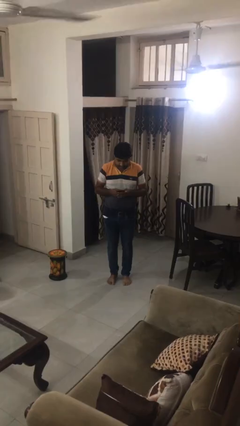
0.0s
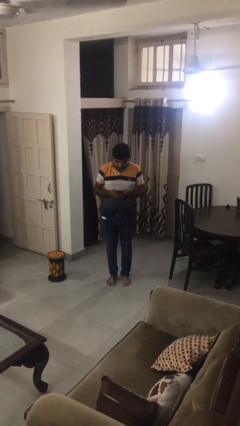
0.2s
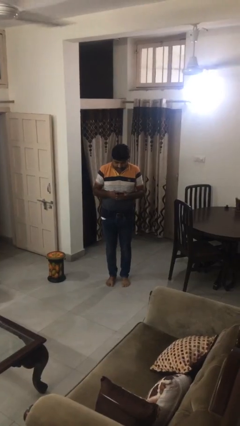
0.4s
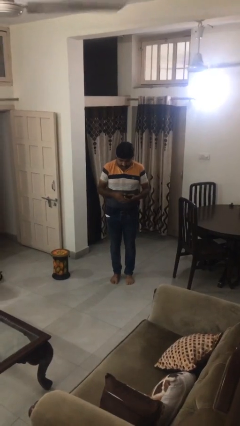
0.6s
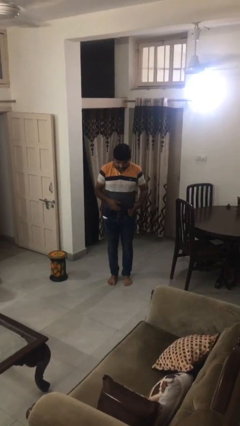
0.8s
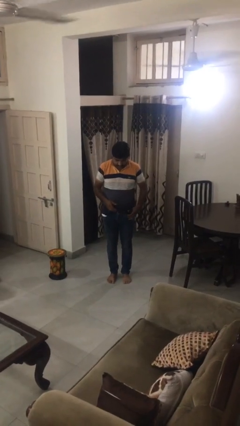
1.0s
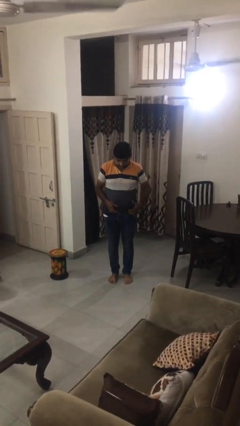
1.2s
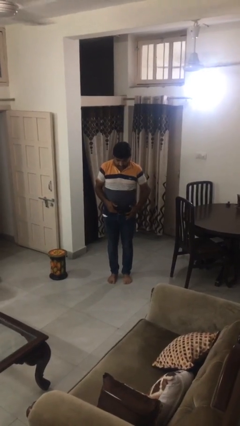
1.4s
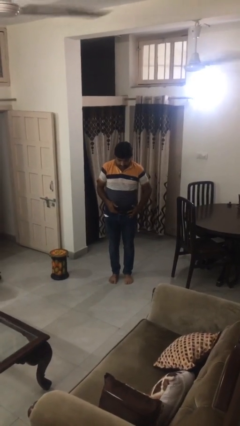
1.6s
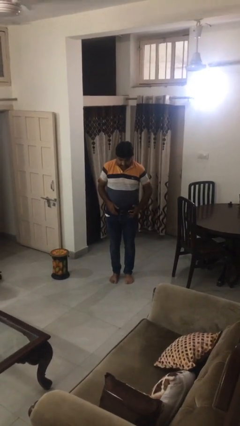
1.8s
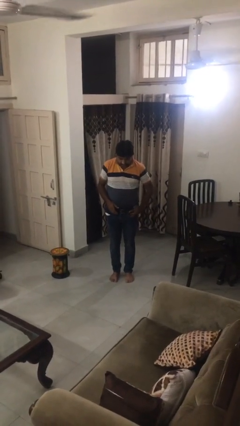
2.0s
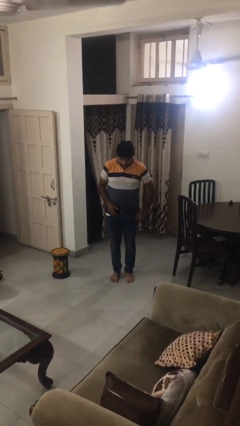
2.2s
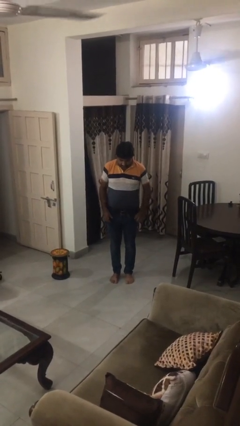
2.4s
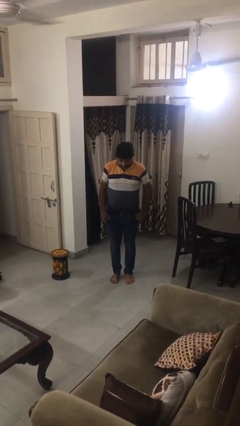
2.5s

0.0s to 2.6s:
person puts phone into pocket

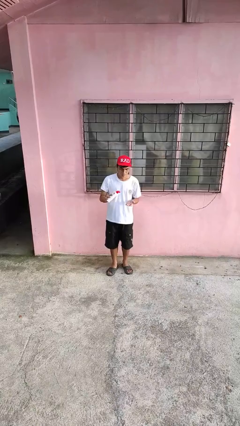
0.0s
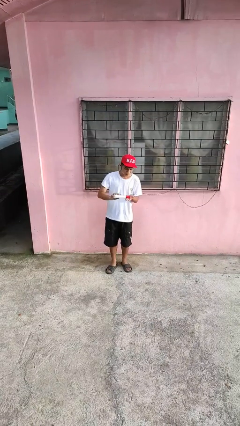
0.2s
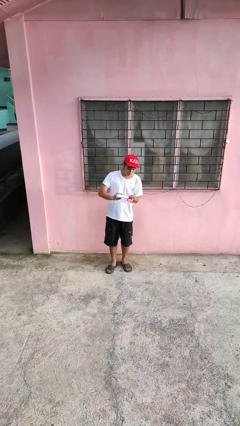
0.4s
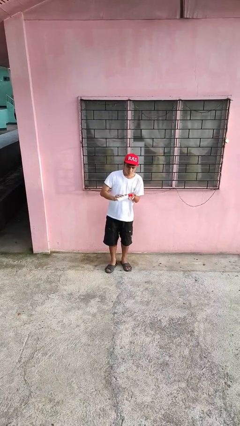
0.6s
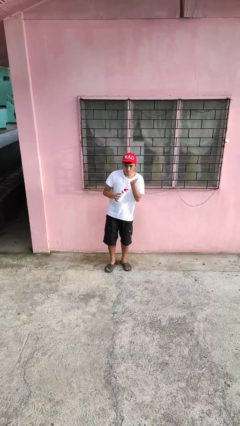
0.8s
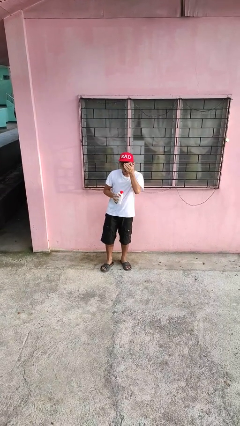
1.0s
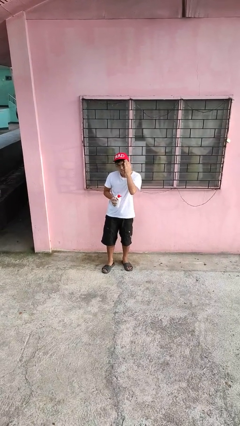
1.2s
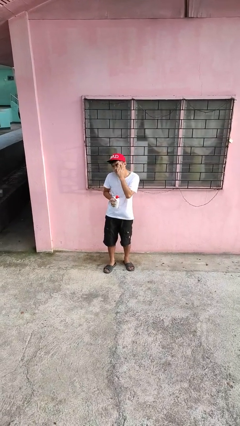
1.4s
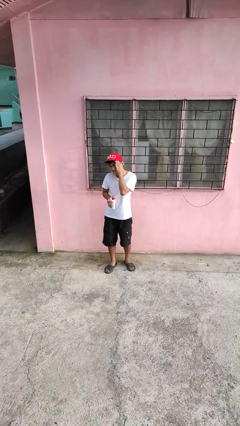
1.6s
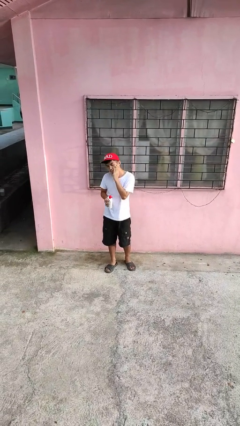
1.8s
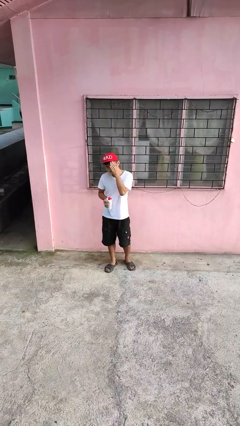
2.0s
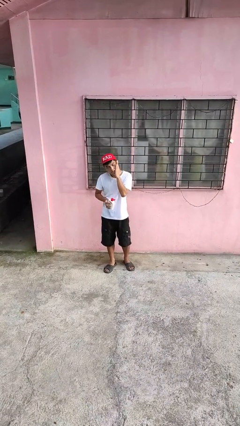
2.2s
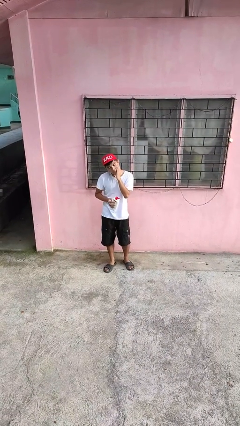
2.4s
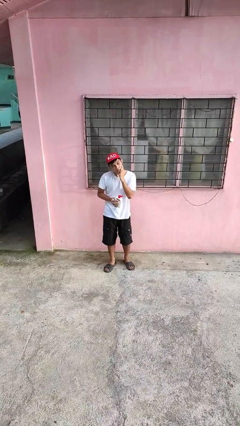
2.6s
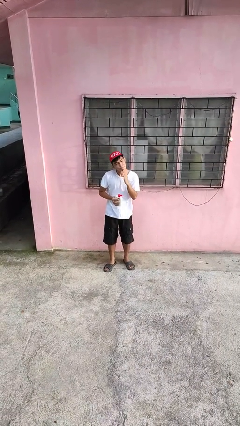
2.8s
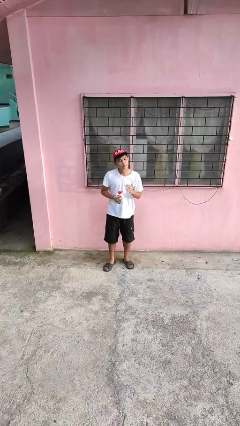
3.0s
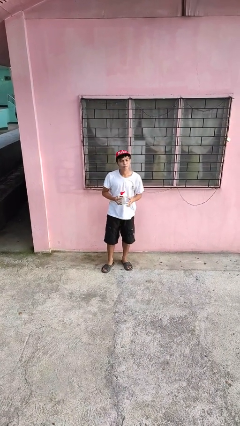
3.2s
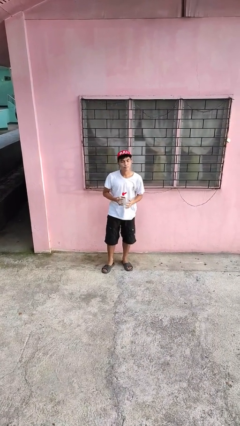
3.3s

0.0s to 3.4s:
person applies facial moisturizer

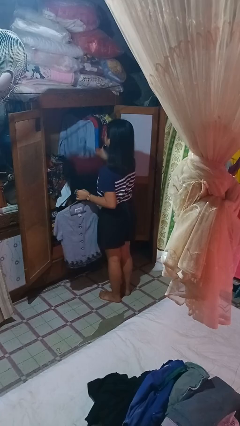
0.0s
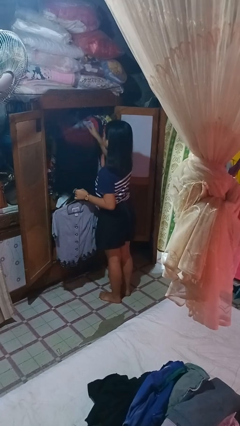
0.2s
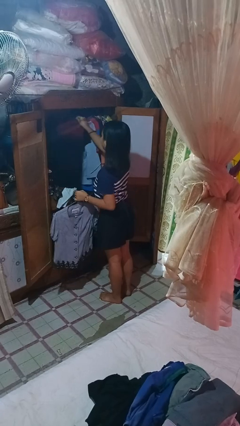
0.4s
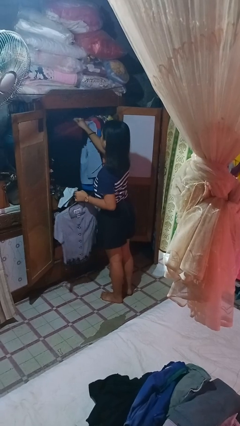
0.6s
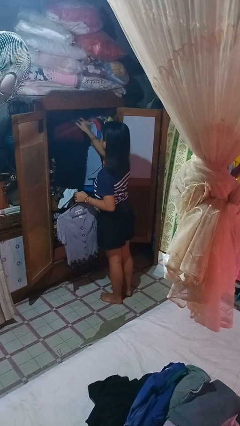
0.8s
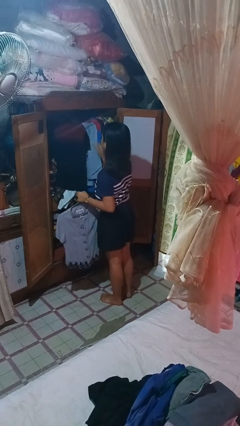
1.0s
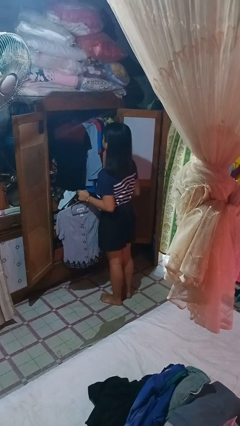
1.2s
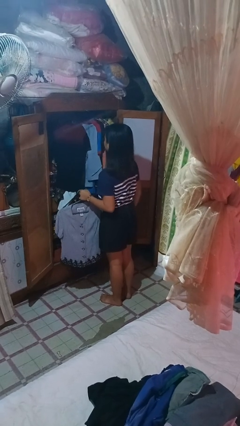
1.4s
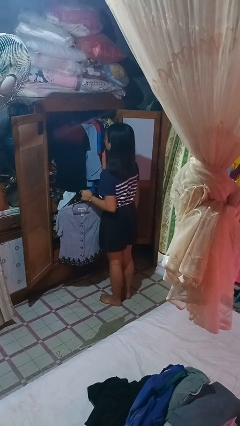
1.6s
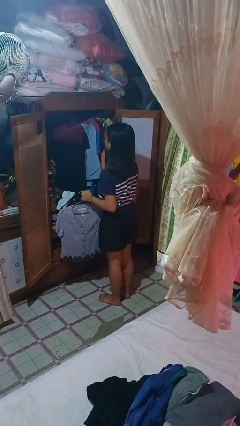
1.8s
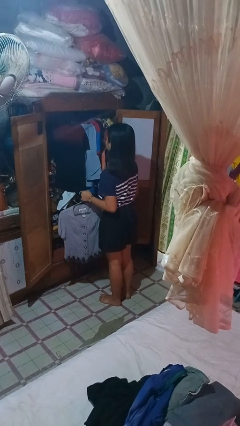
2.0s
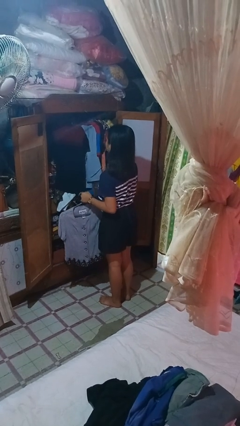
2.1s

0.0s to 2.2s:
person puts clothes into closet

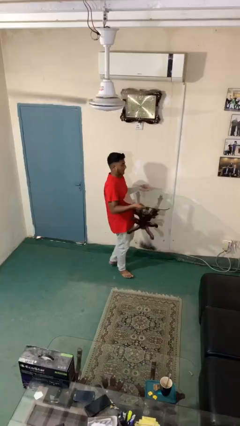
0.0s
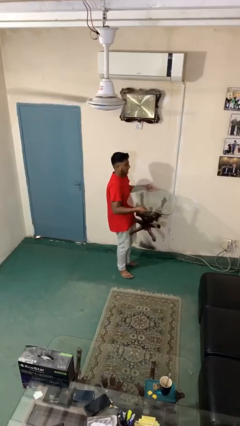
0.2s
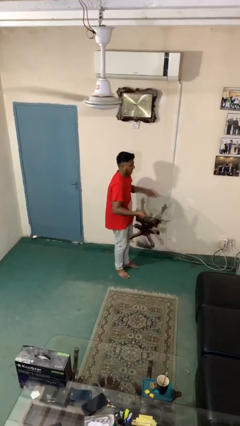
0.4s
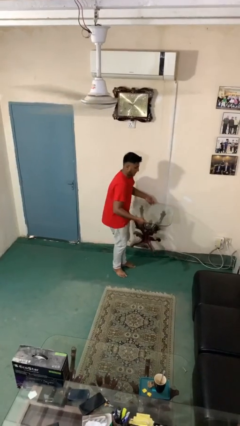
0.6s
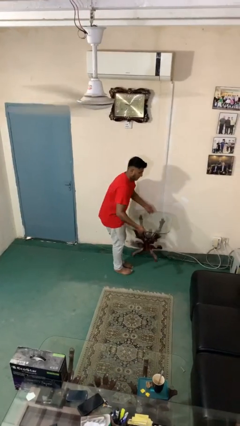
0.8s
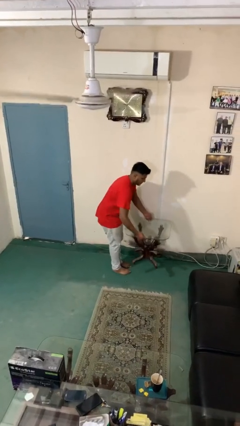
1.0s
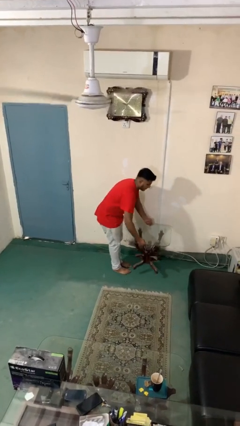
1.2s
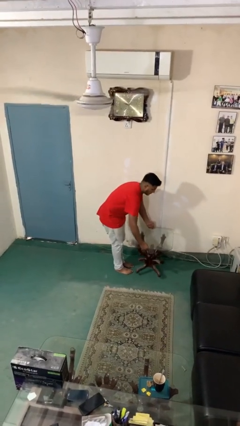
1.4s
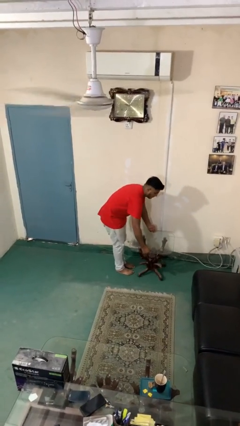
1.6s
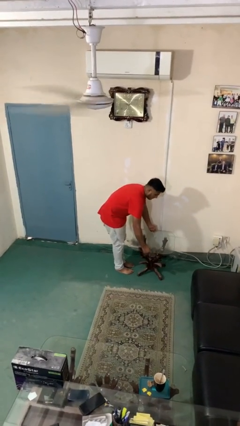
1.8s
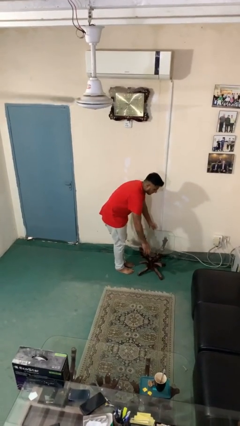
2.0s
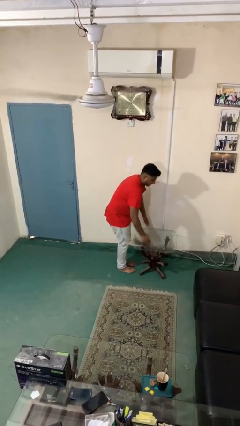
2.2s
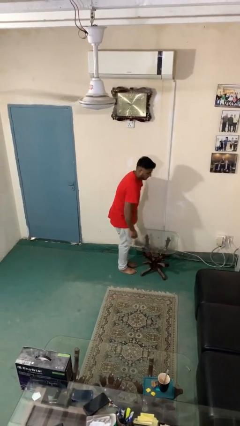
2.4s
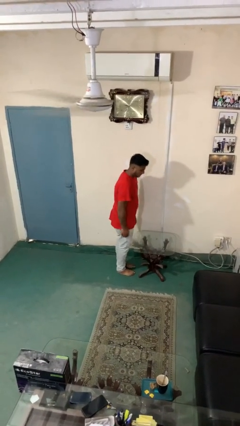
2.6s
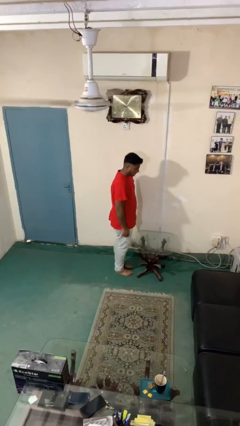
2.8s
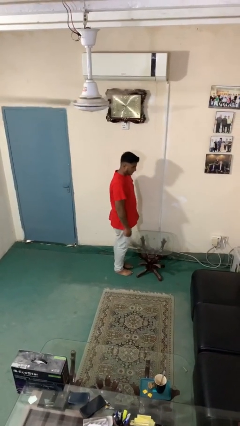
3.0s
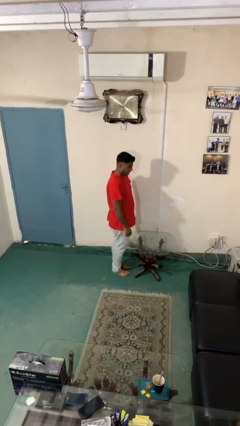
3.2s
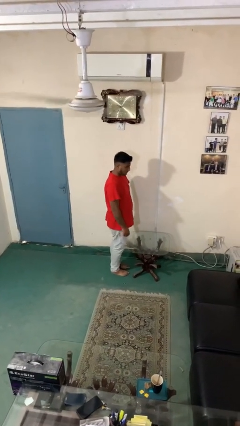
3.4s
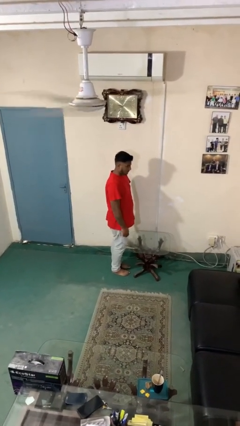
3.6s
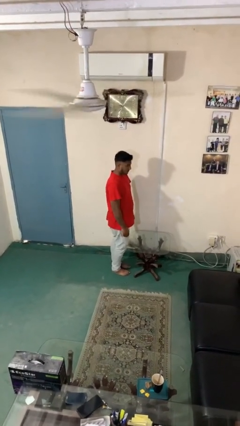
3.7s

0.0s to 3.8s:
person puts down object on floor

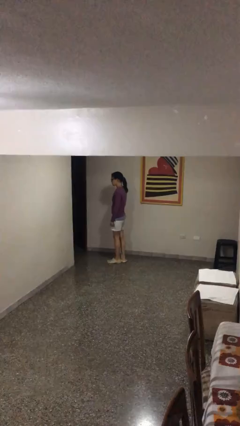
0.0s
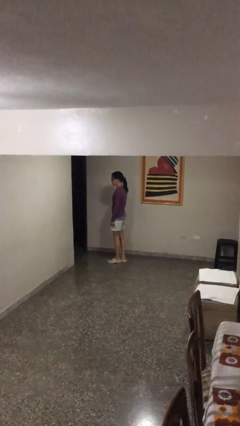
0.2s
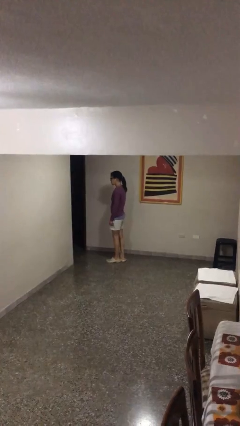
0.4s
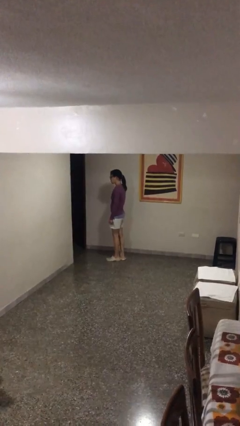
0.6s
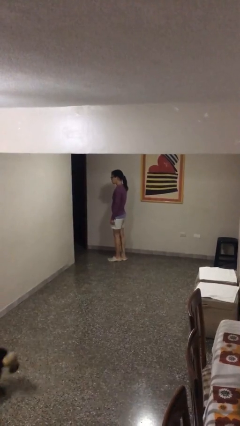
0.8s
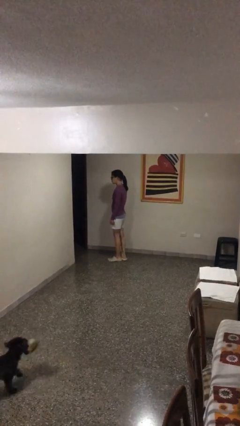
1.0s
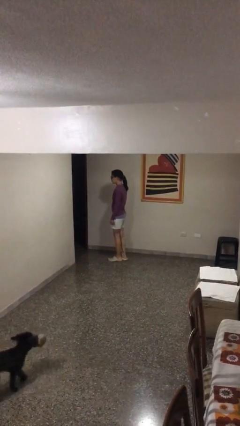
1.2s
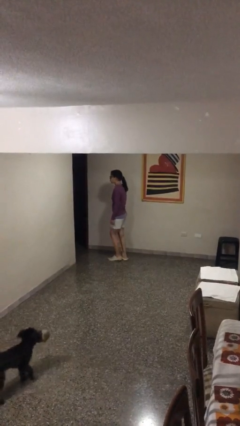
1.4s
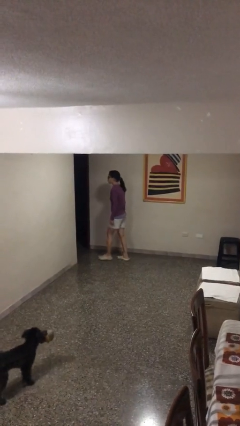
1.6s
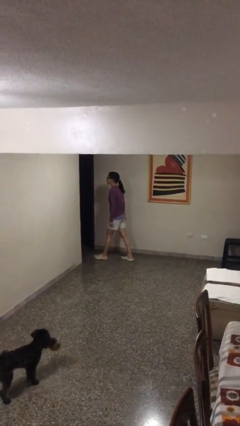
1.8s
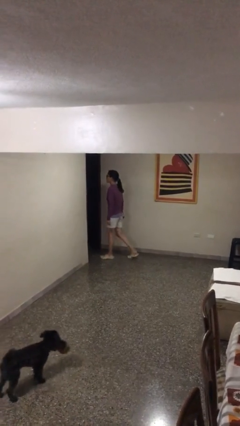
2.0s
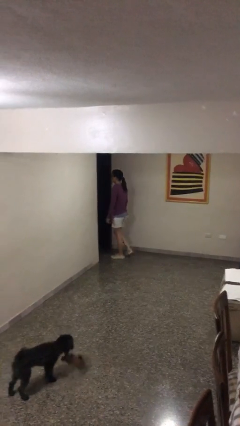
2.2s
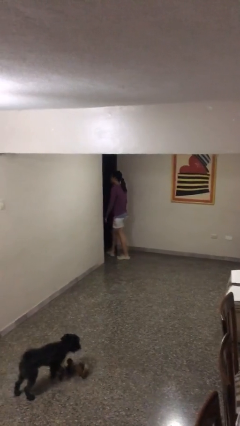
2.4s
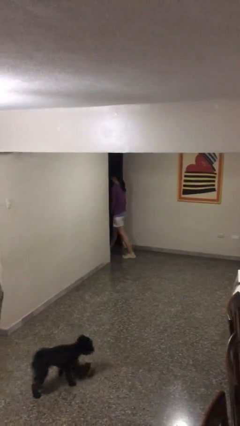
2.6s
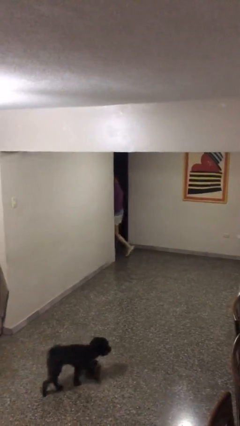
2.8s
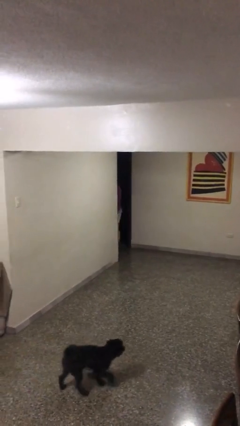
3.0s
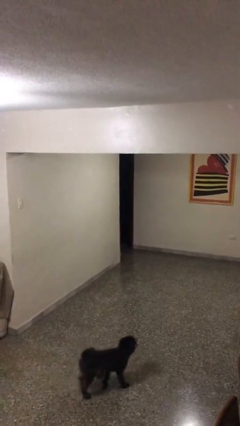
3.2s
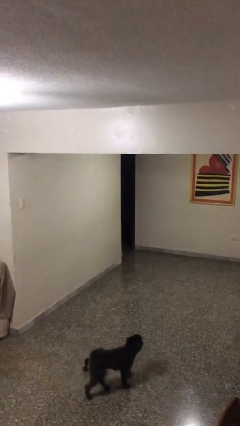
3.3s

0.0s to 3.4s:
person exits scene through structure

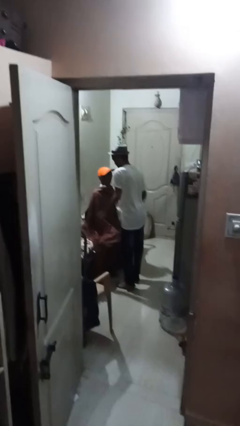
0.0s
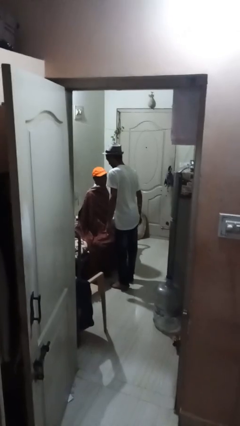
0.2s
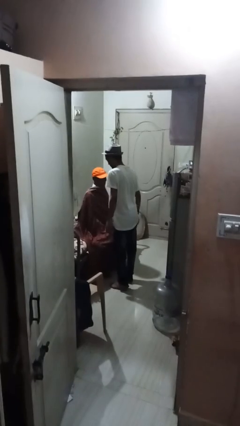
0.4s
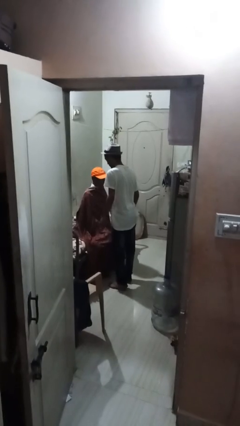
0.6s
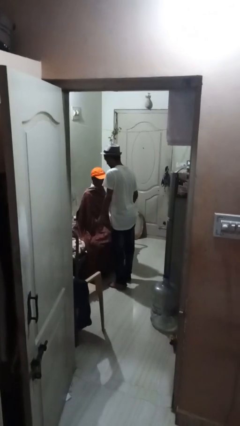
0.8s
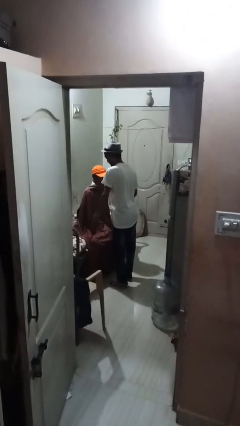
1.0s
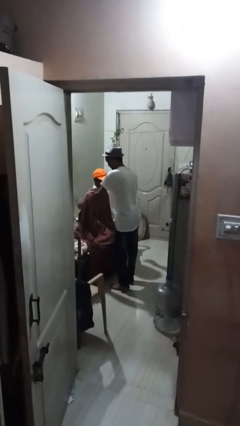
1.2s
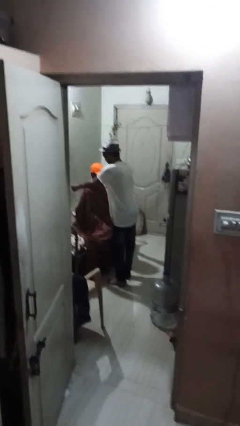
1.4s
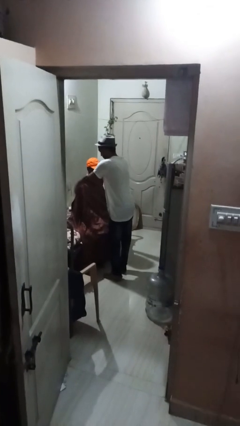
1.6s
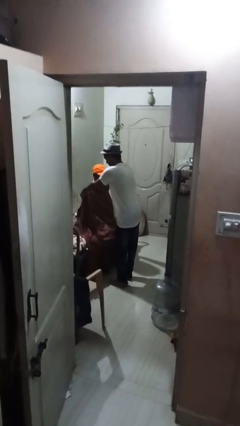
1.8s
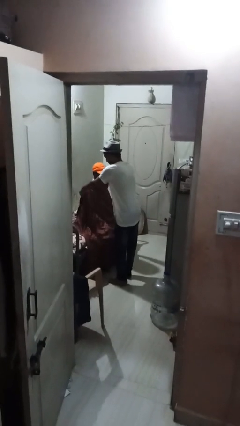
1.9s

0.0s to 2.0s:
person covers friend with blanket
